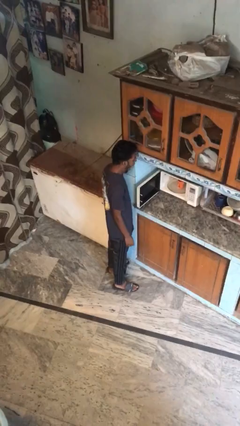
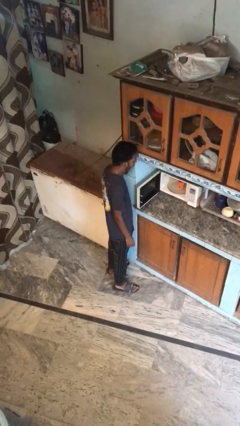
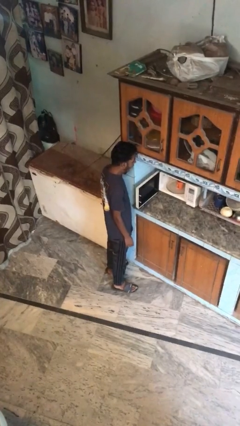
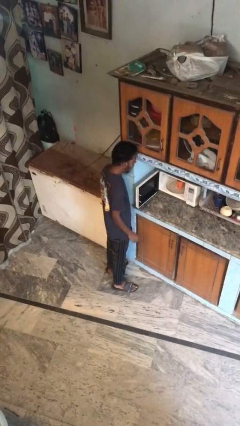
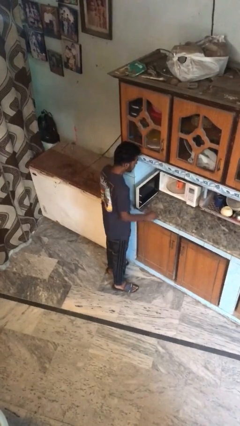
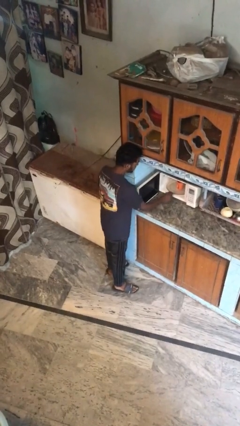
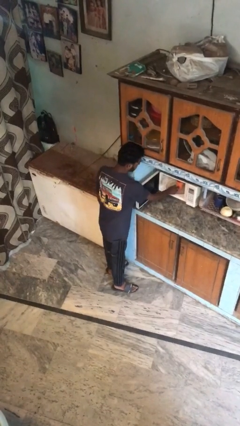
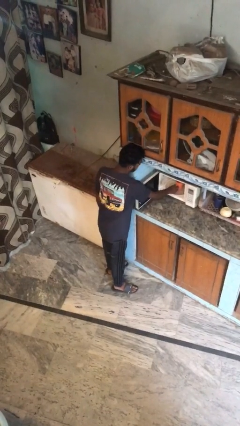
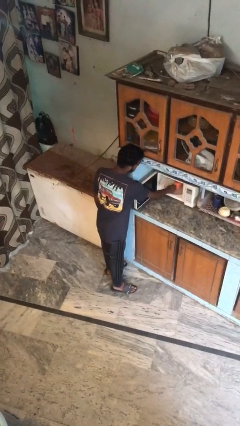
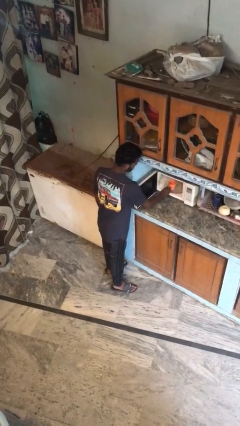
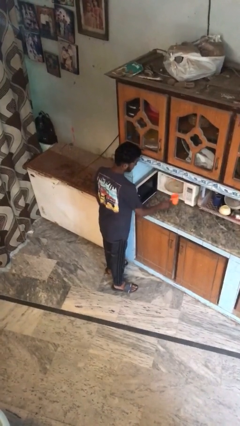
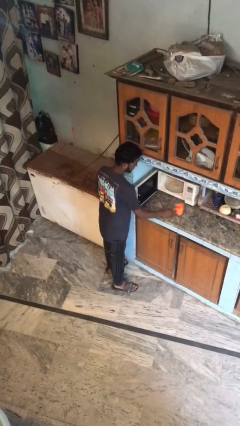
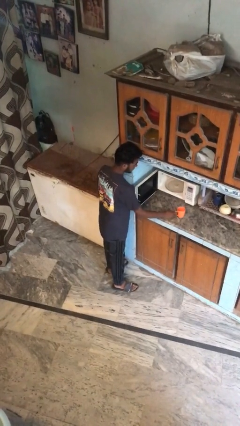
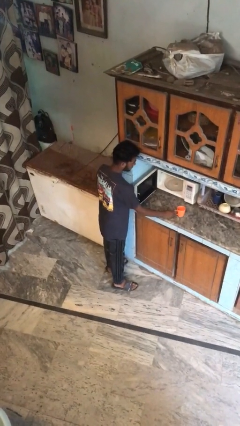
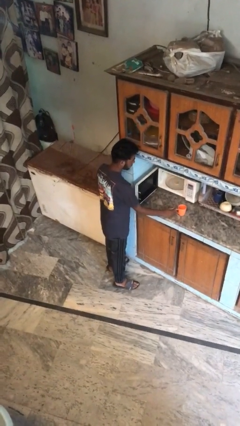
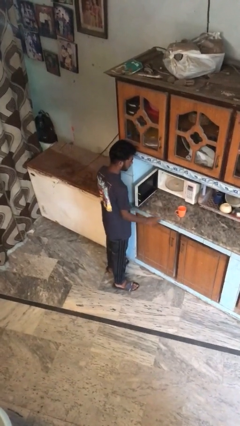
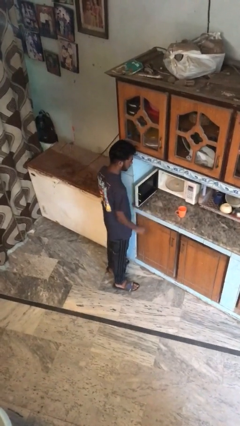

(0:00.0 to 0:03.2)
person takes object from microwave

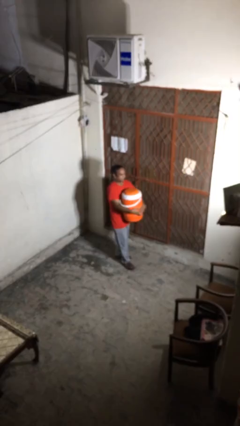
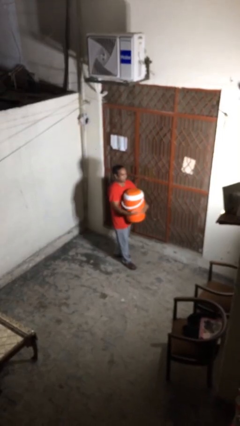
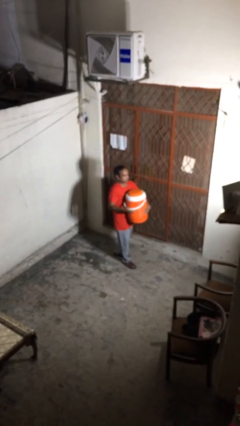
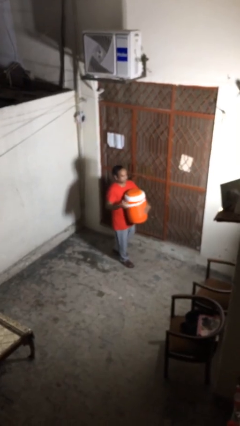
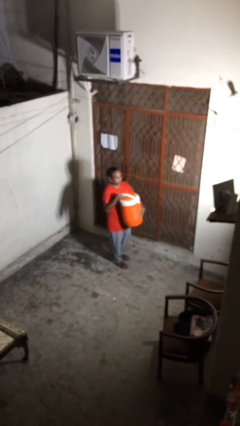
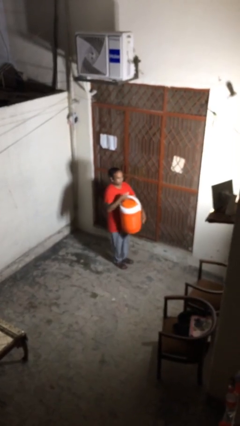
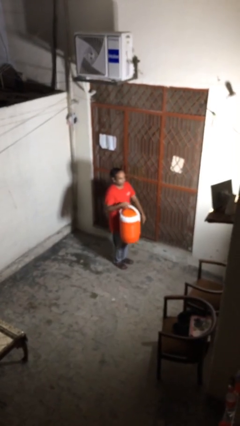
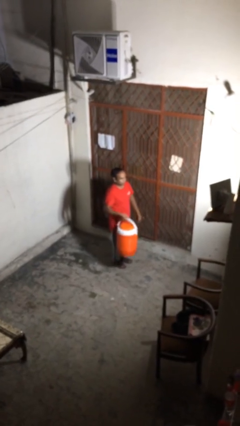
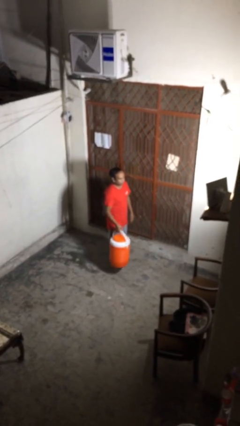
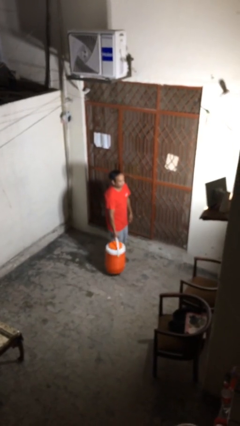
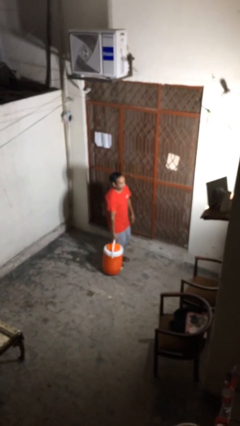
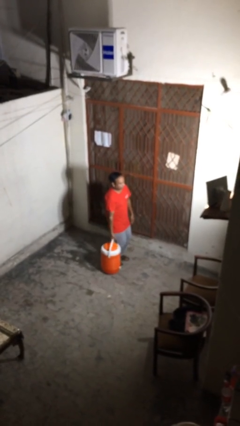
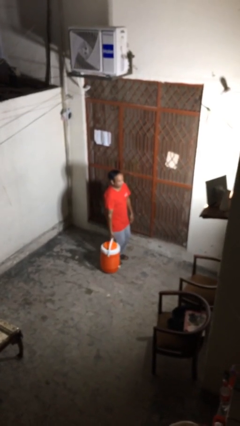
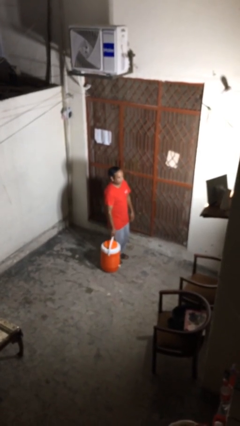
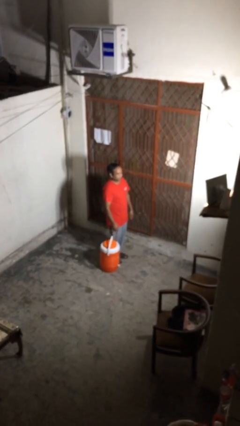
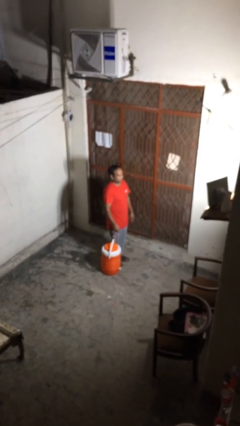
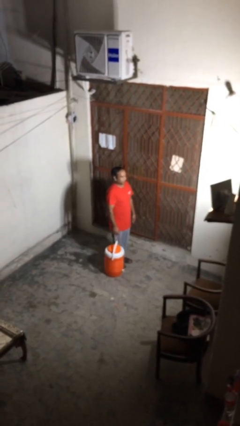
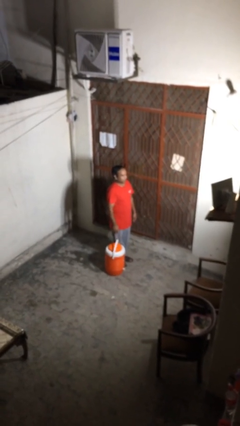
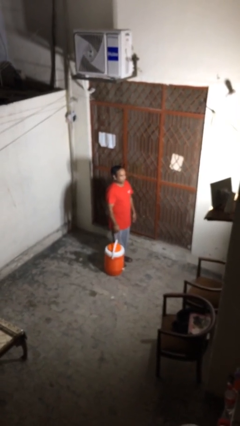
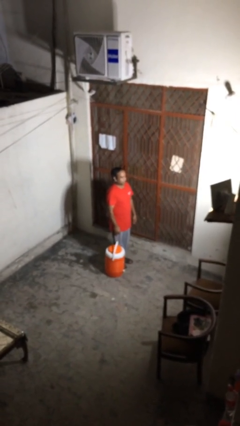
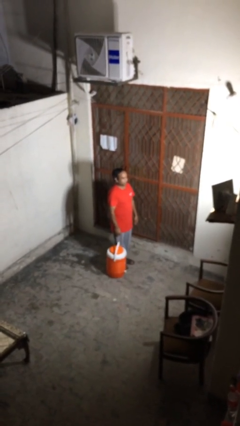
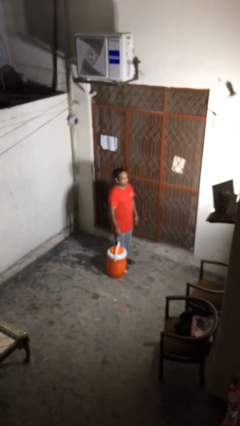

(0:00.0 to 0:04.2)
person puts down object on floor

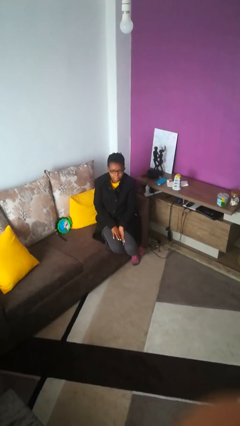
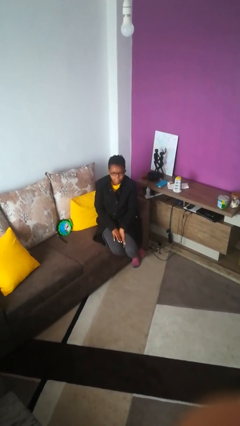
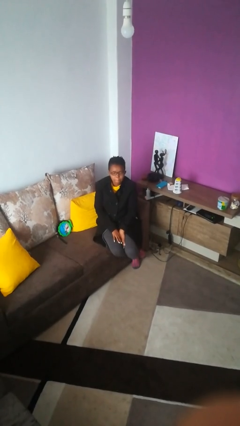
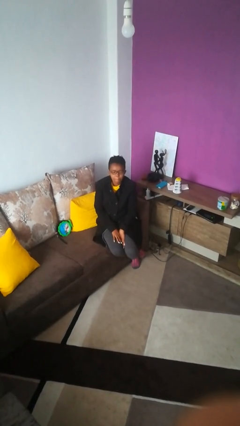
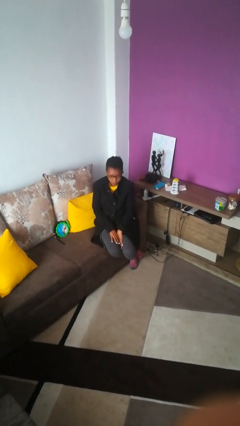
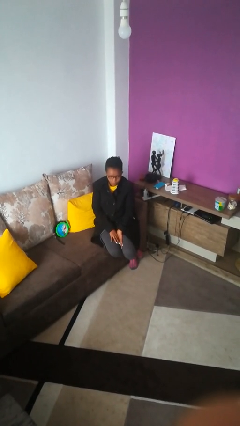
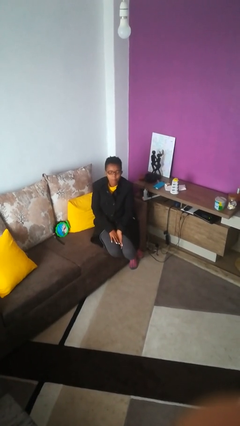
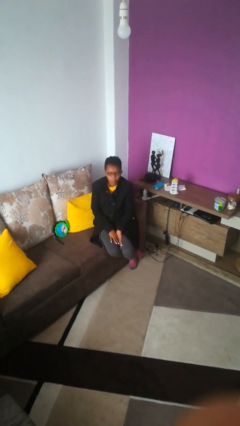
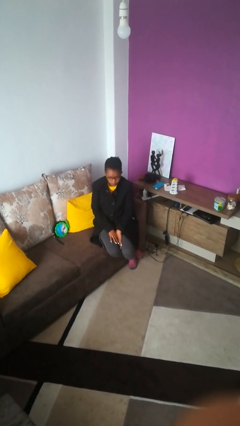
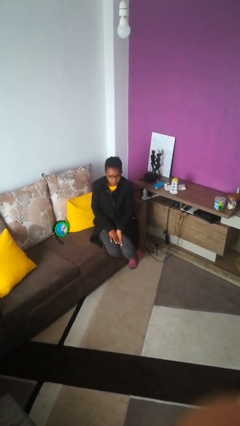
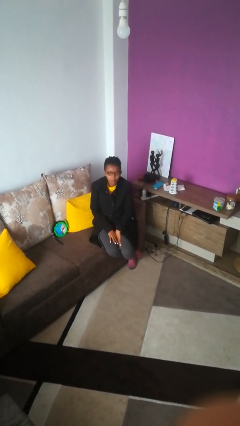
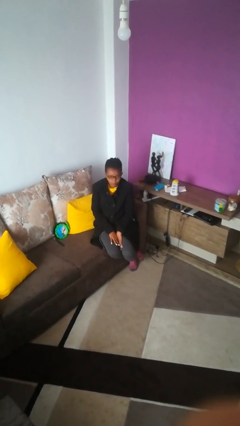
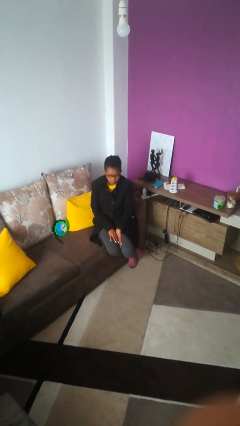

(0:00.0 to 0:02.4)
person nods head

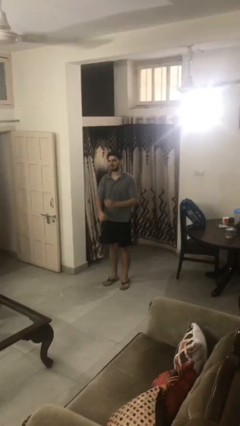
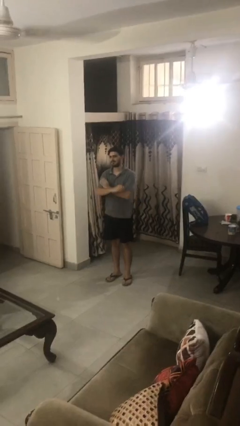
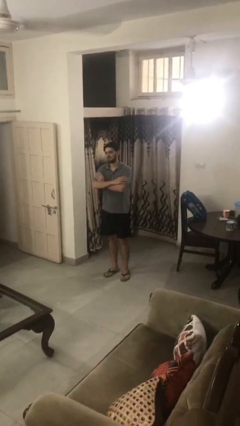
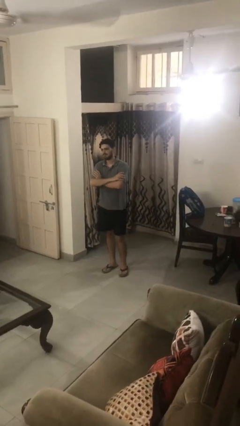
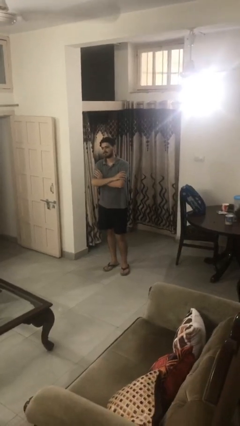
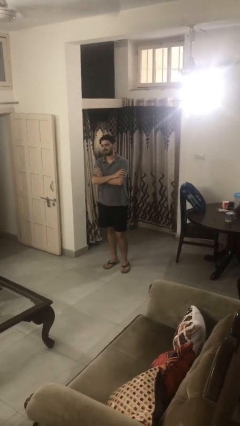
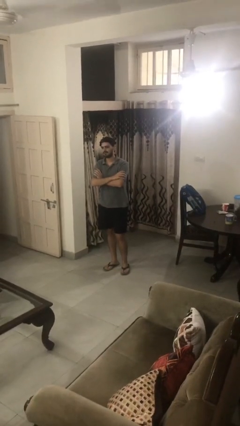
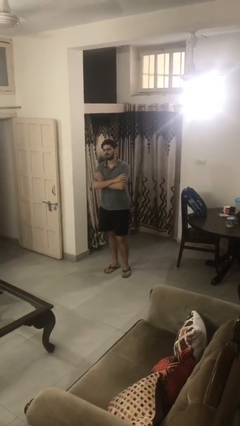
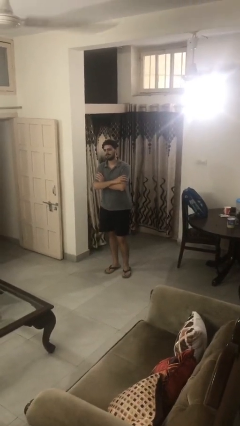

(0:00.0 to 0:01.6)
person crosses arms

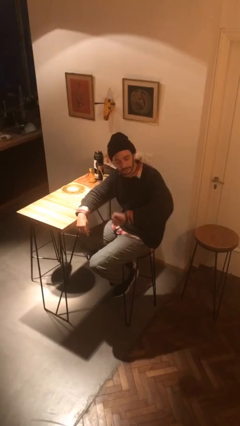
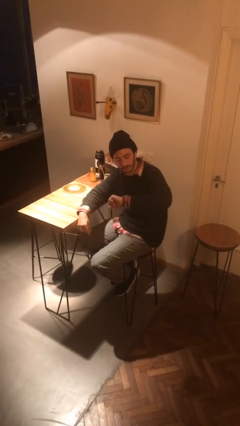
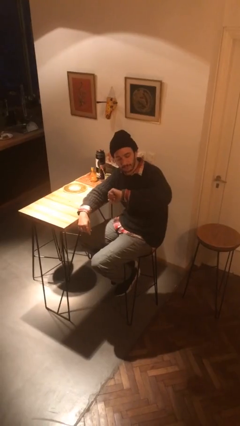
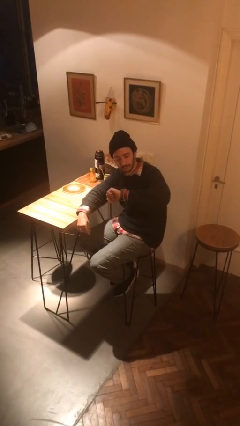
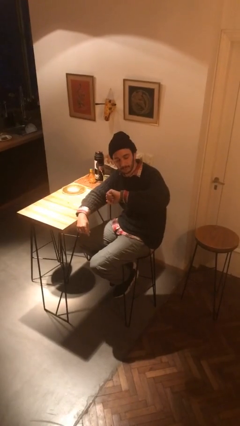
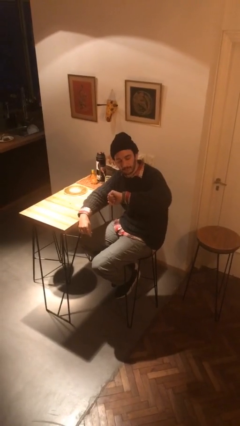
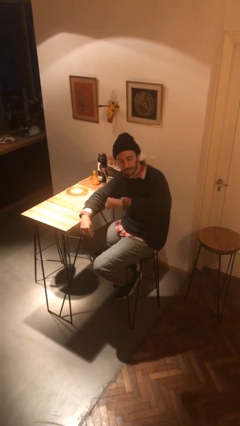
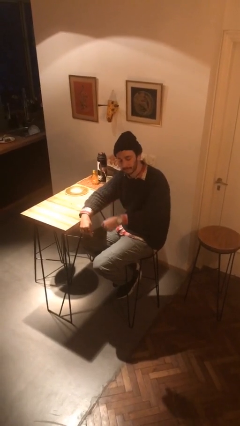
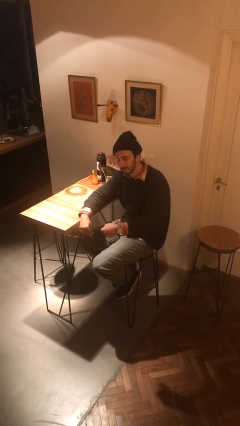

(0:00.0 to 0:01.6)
person looks at wristwatch

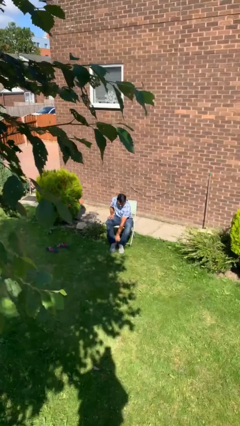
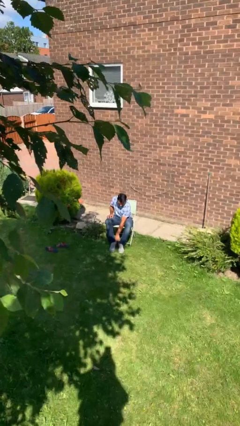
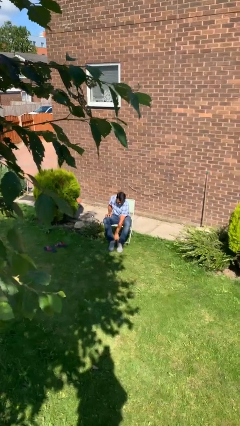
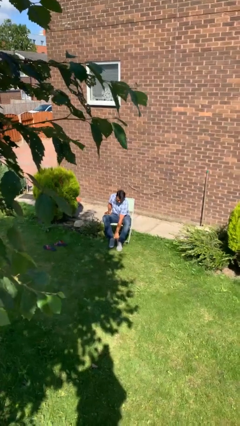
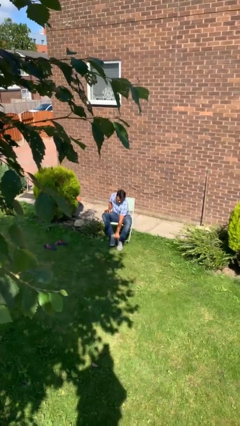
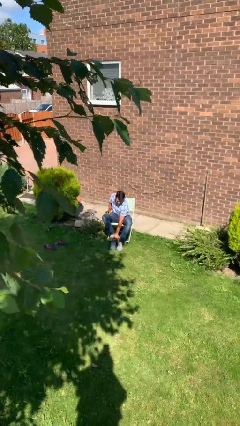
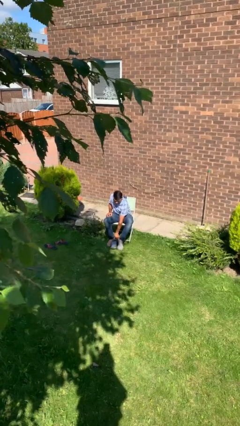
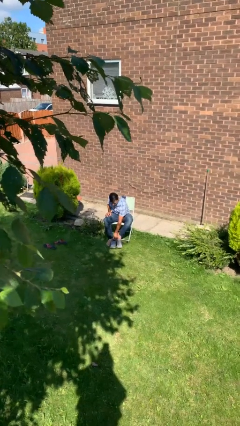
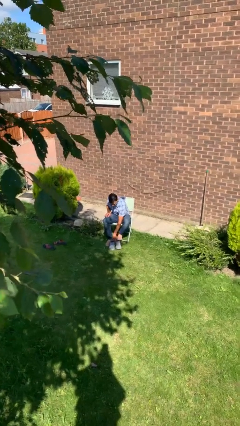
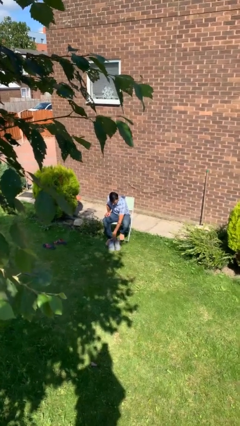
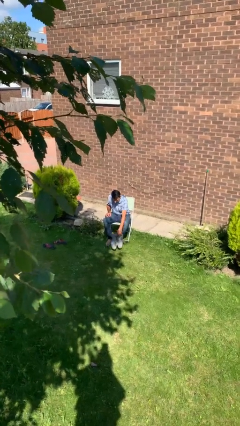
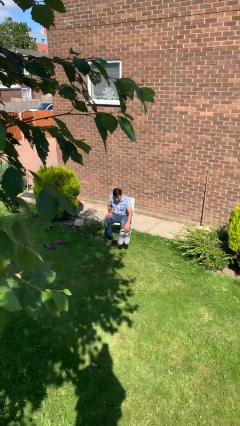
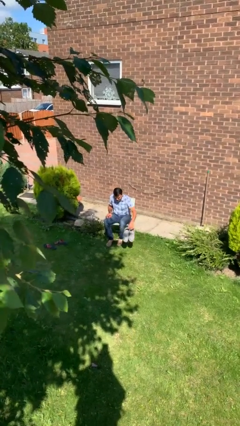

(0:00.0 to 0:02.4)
person takes off shoes

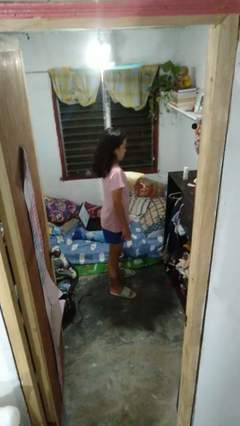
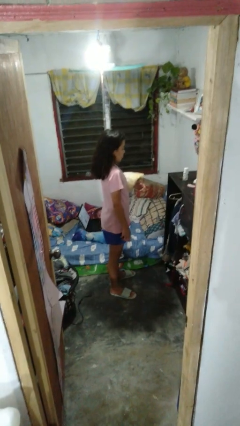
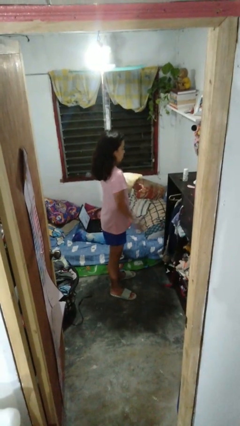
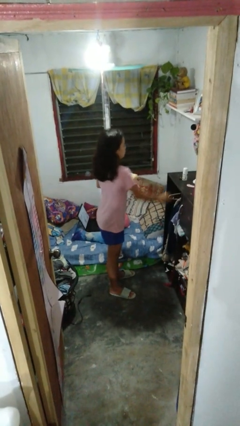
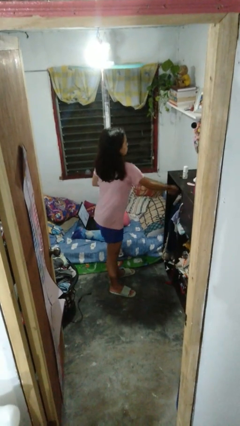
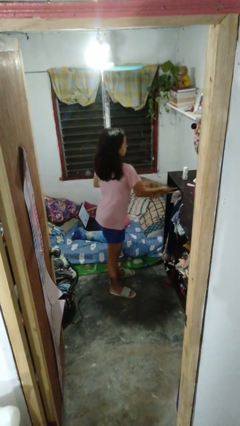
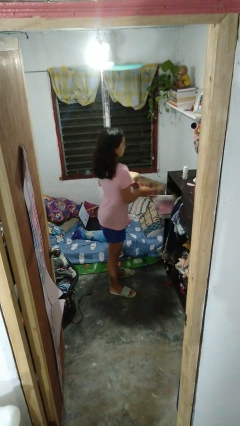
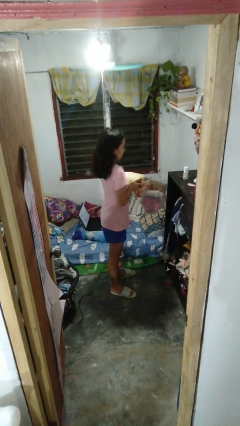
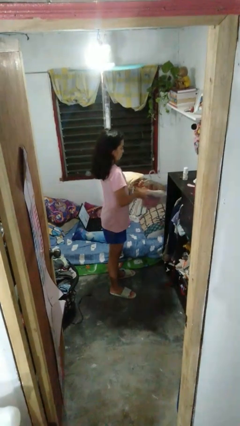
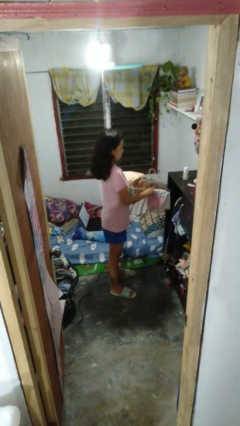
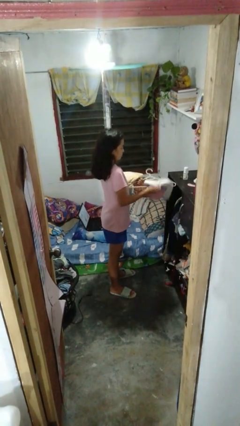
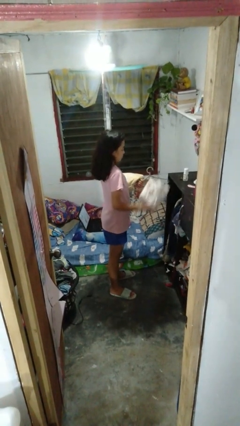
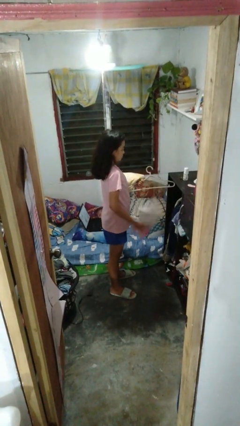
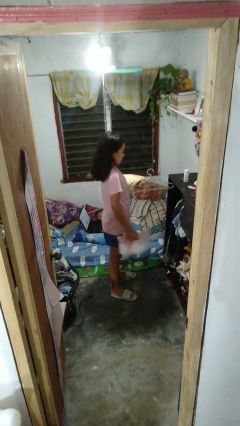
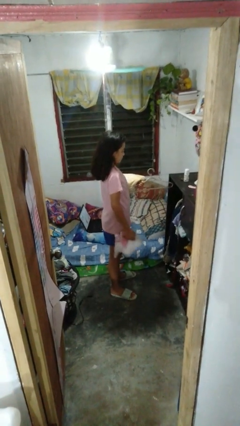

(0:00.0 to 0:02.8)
person takes clothes from closet
